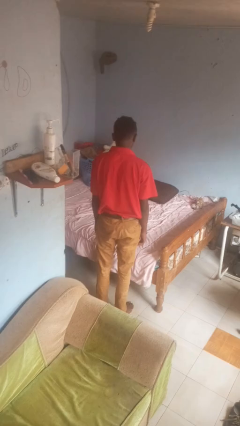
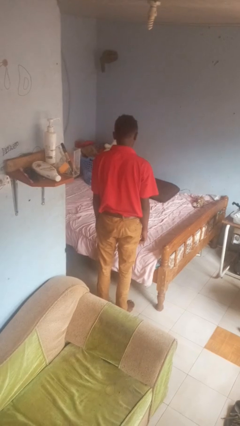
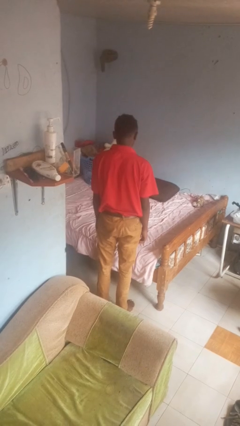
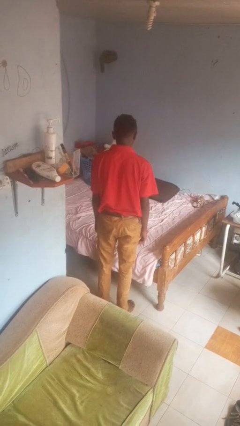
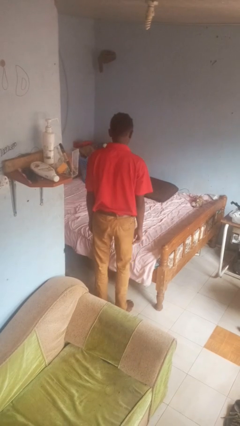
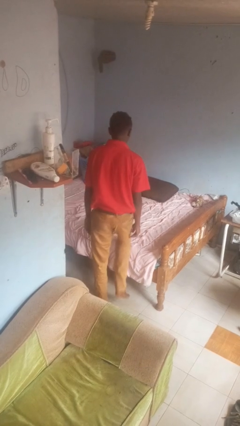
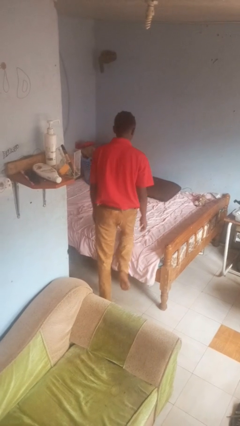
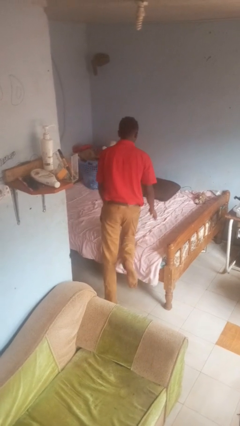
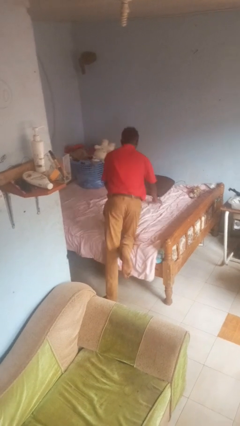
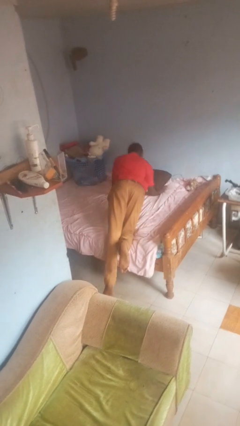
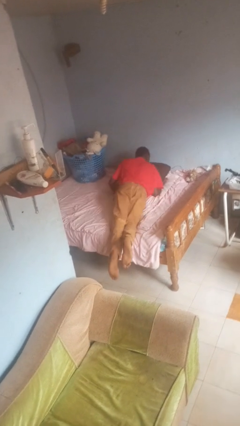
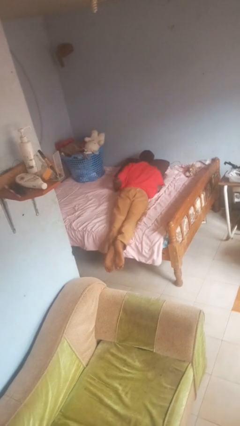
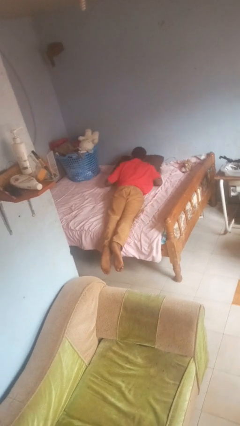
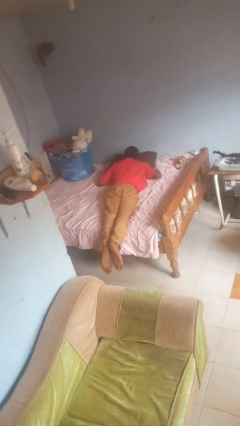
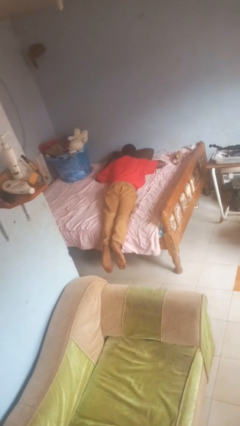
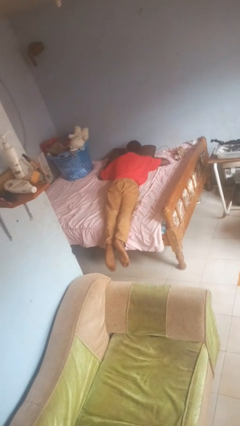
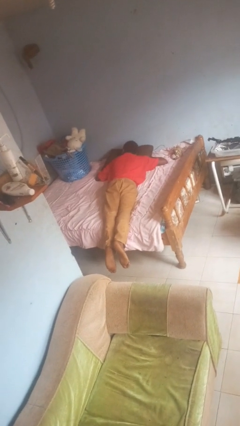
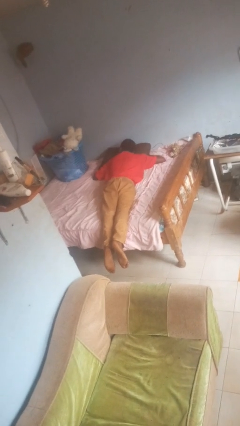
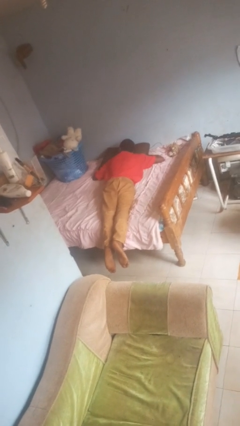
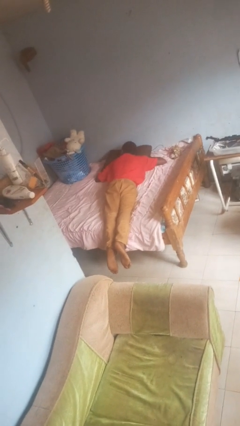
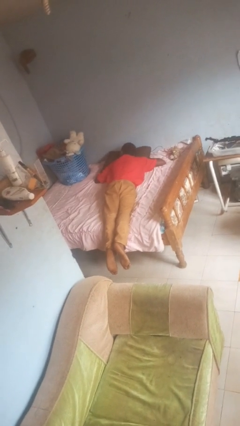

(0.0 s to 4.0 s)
person lies down on bed

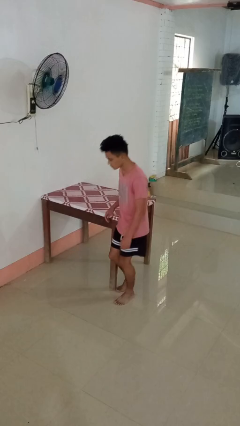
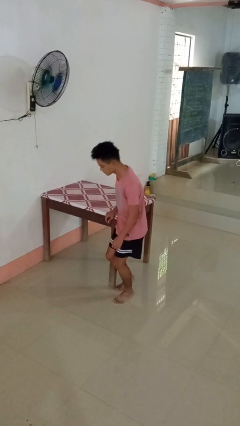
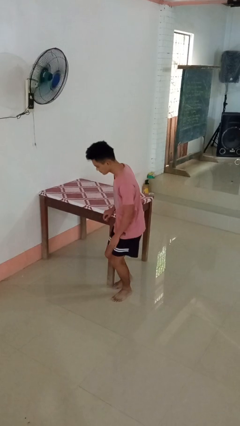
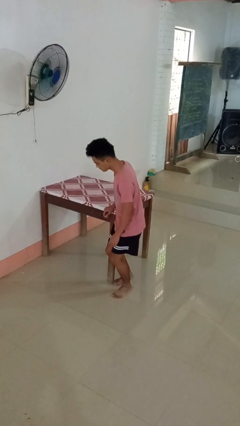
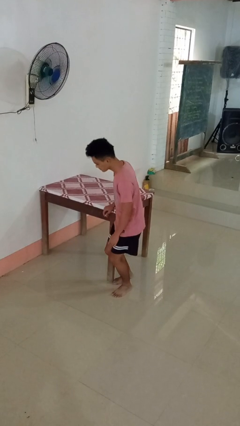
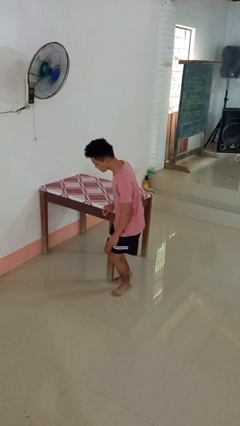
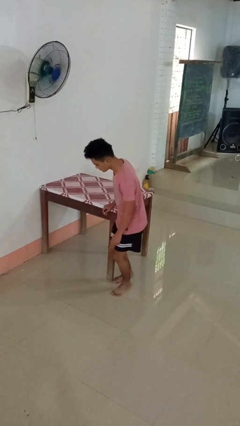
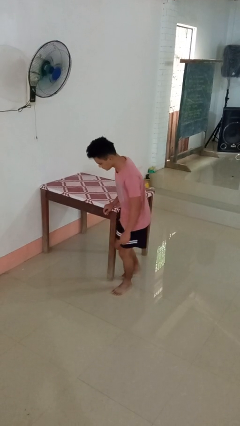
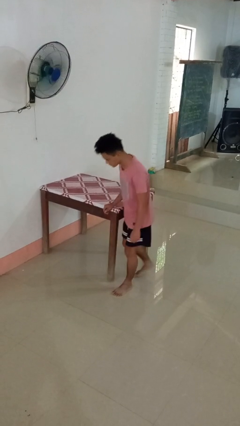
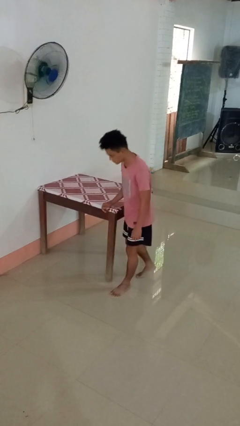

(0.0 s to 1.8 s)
person stubs toe

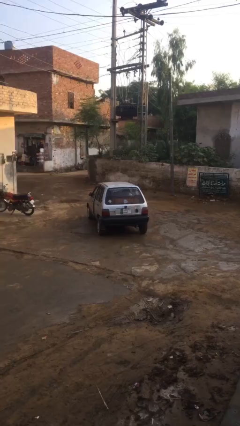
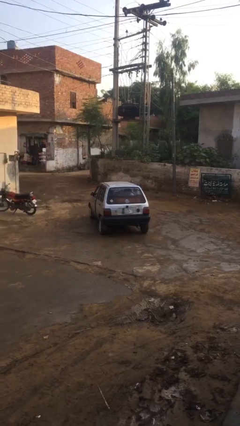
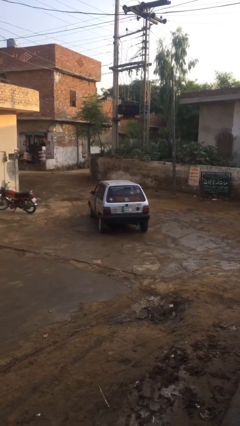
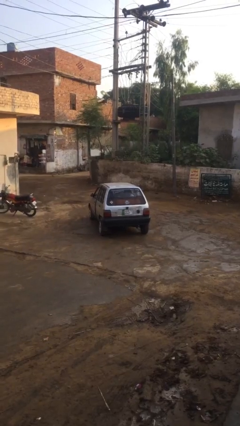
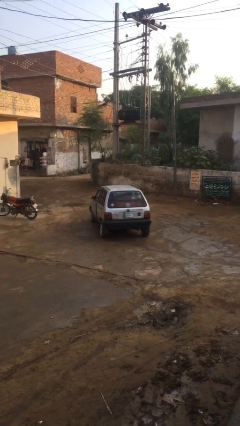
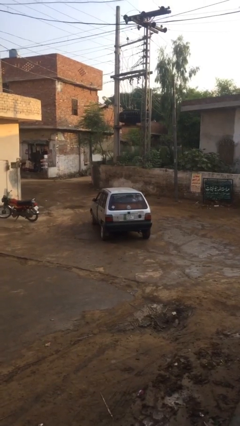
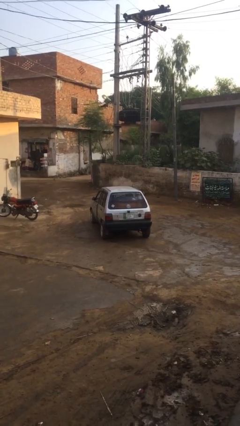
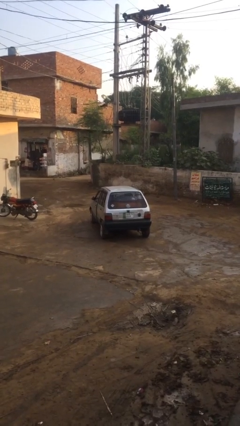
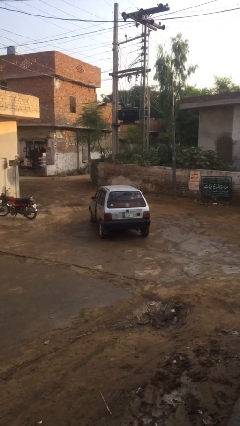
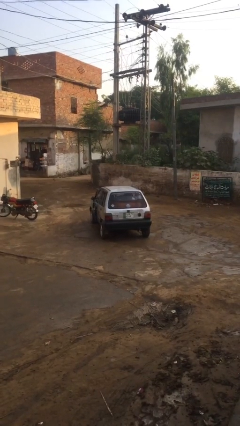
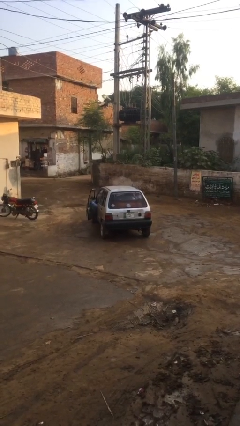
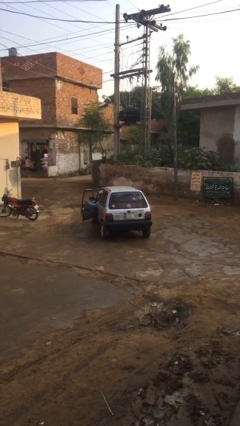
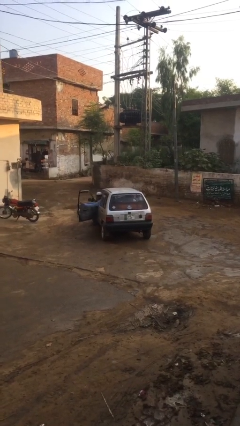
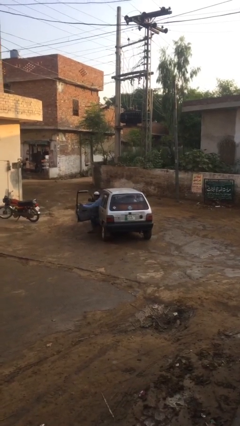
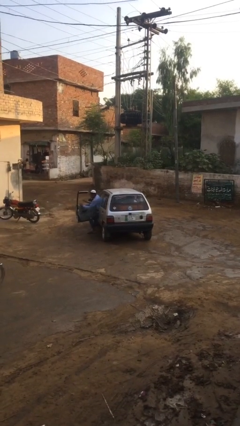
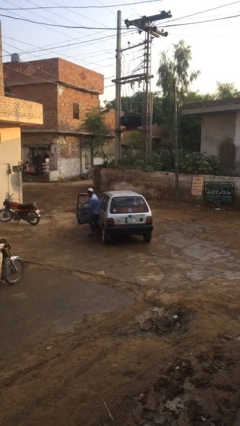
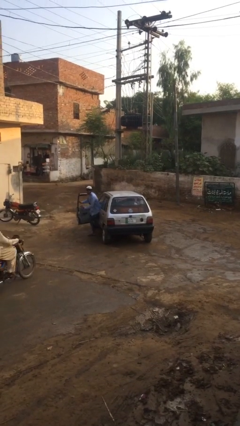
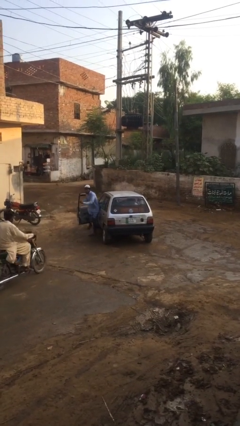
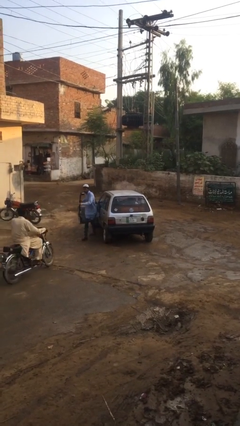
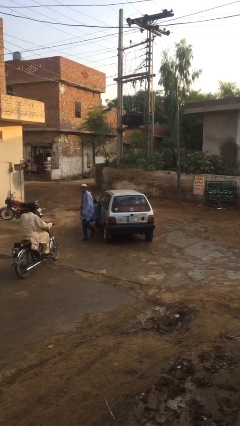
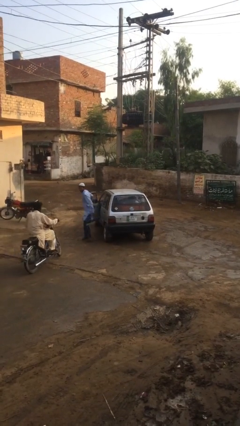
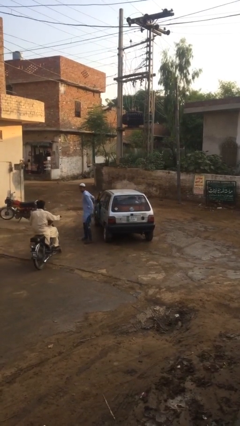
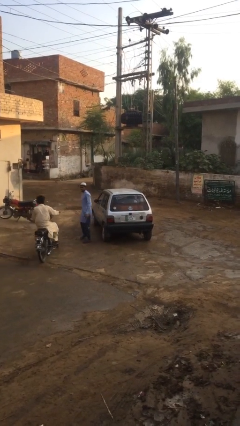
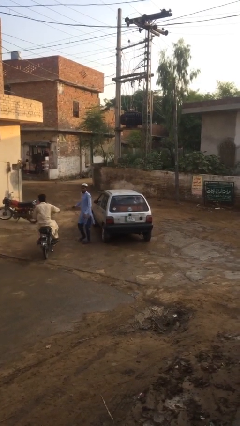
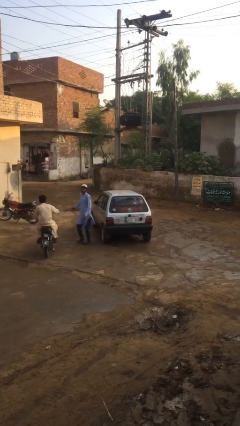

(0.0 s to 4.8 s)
car drops off person

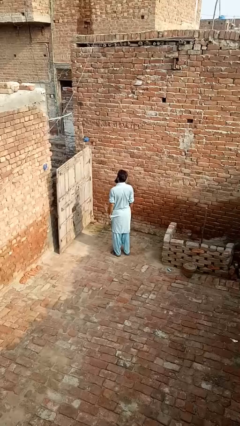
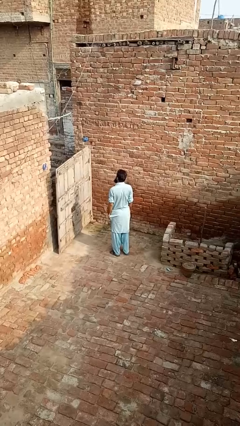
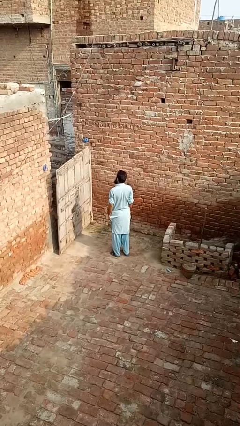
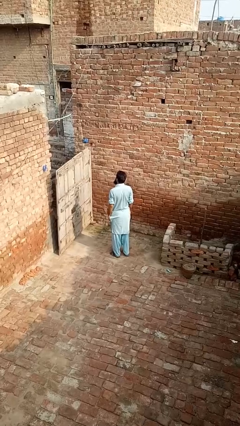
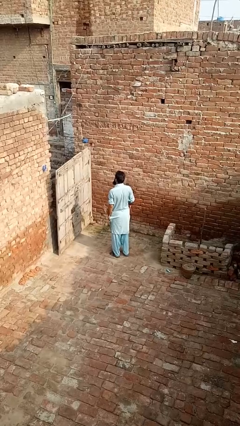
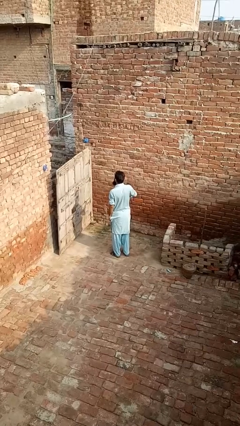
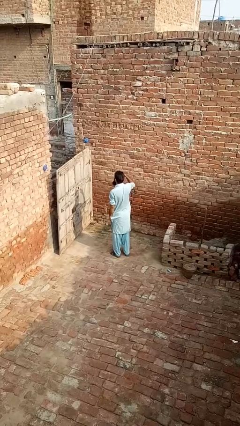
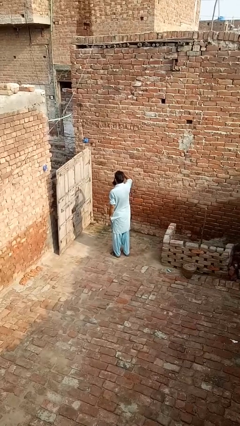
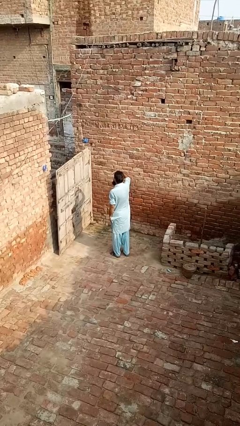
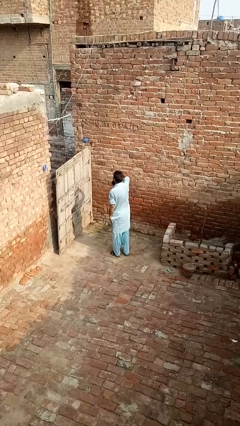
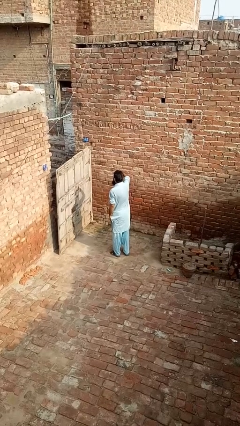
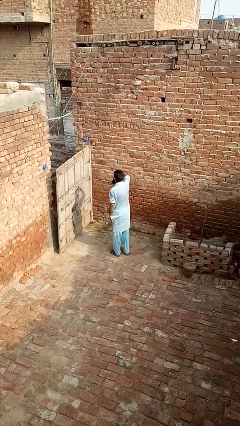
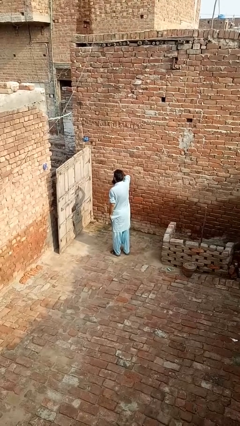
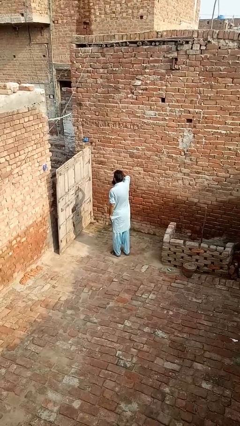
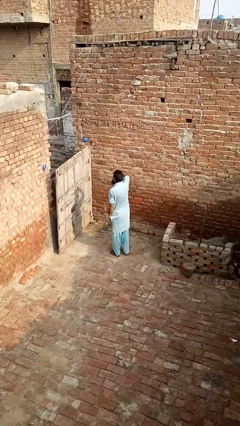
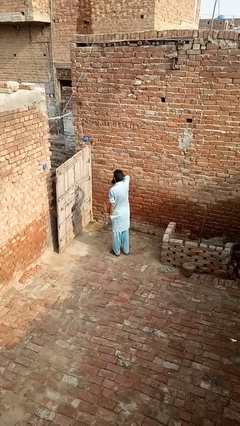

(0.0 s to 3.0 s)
person shades eyes

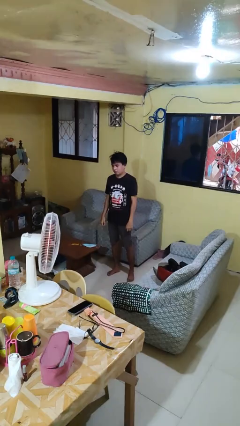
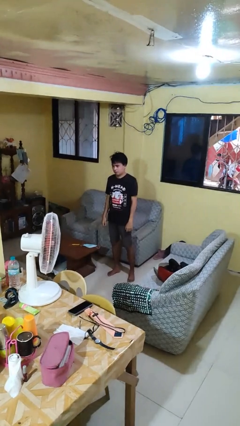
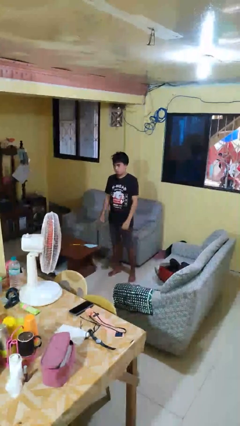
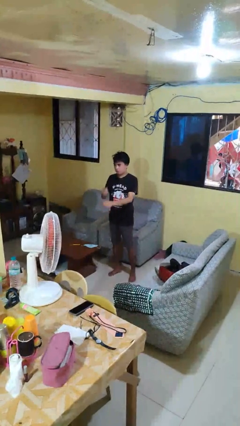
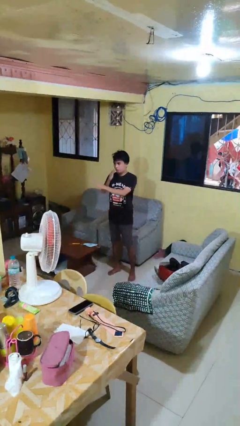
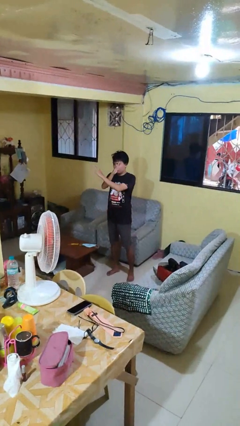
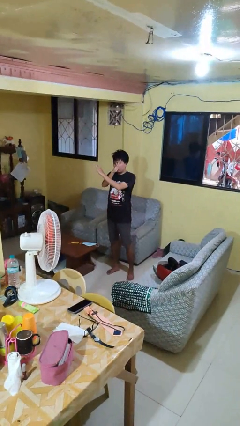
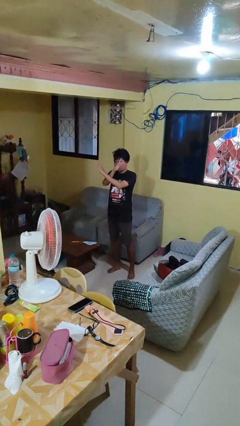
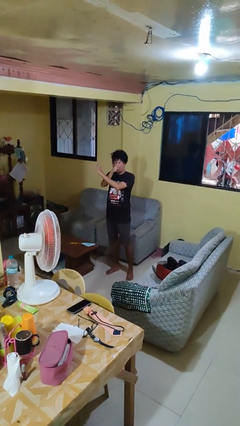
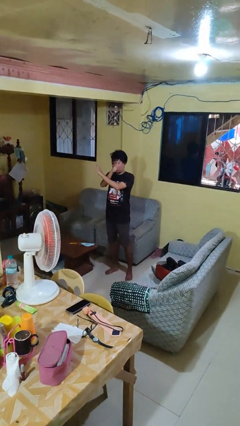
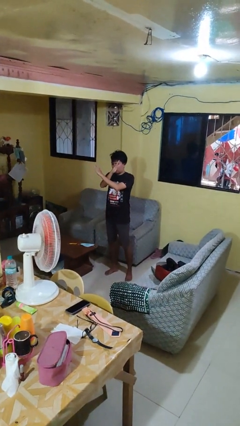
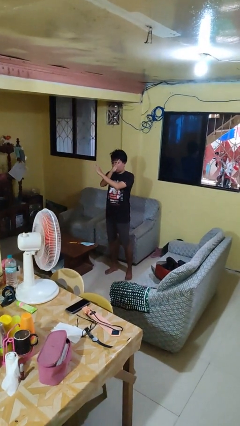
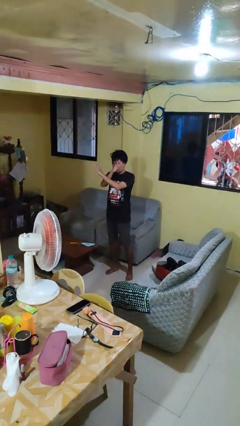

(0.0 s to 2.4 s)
person gestures arms x

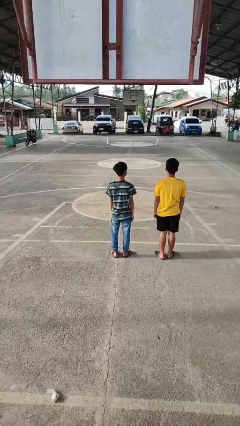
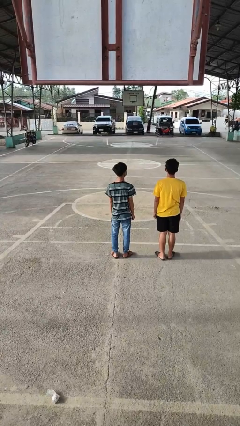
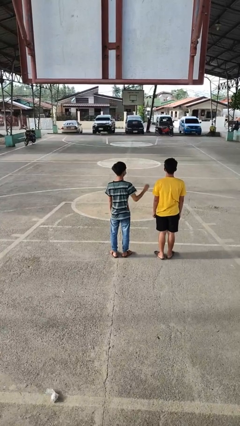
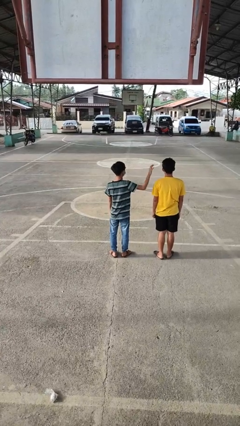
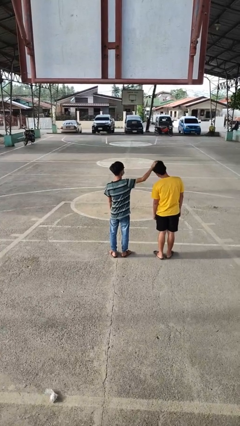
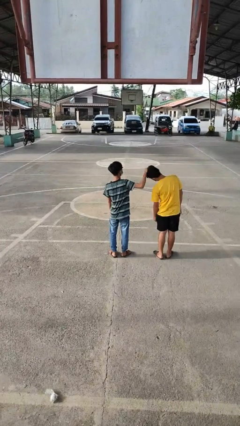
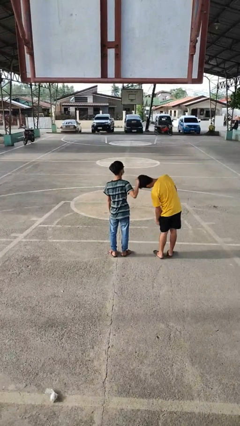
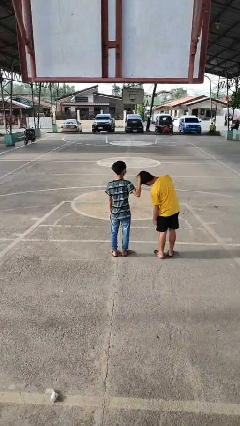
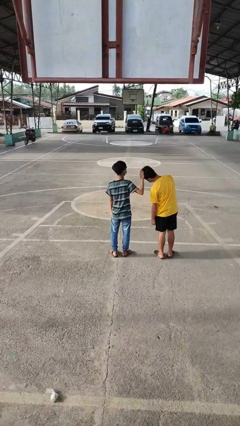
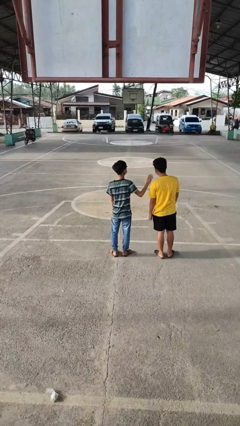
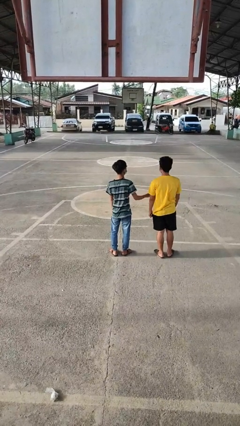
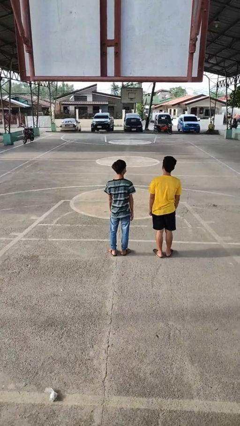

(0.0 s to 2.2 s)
person grabs person by hair
